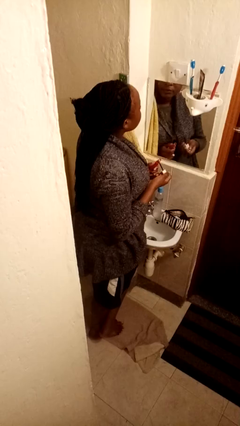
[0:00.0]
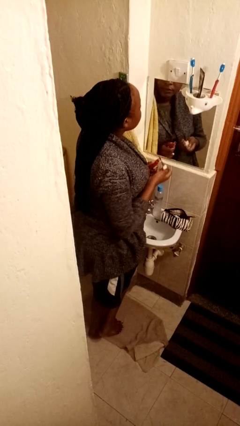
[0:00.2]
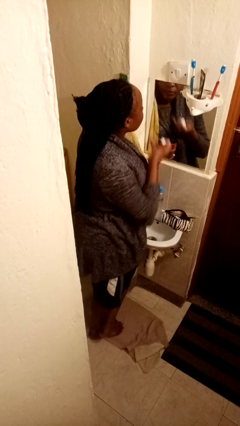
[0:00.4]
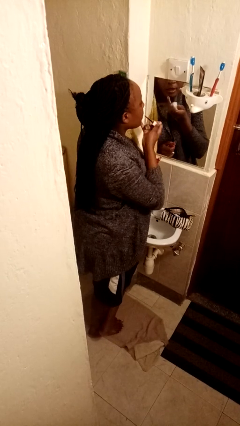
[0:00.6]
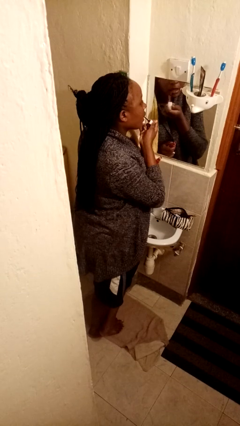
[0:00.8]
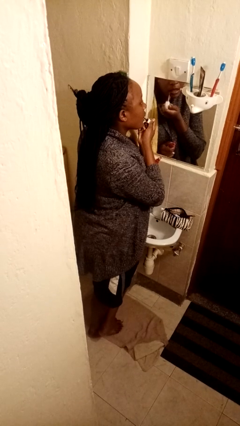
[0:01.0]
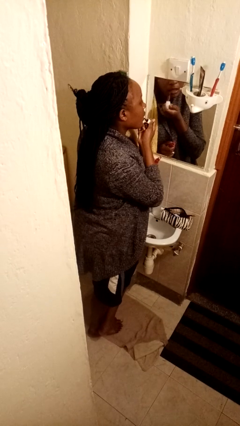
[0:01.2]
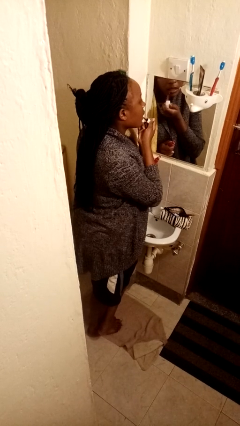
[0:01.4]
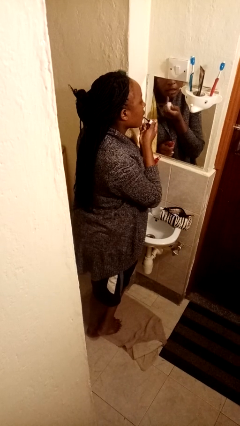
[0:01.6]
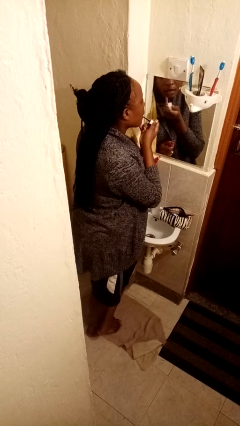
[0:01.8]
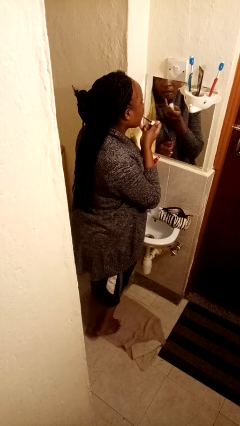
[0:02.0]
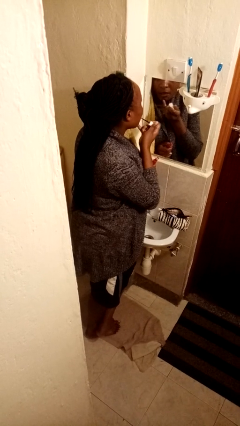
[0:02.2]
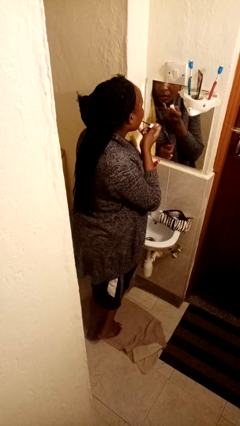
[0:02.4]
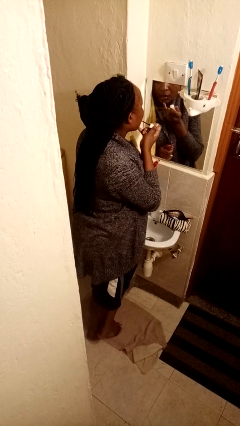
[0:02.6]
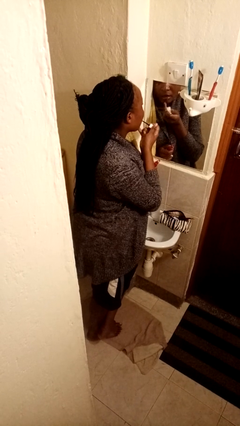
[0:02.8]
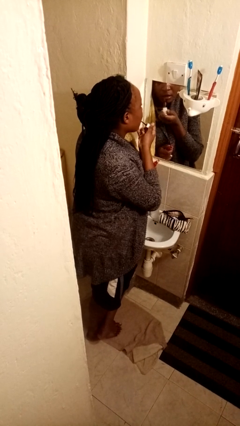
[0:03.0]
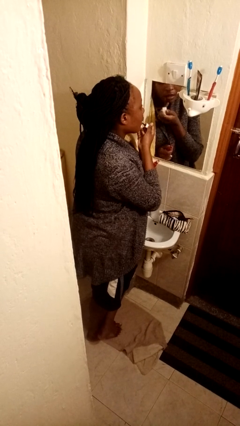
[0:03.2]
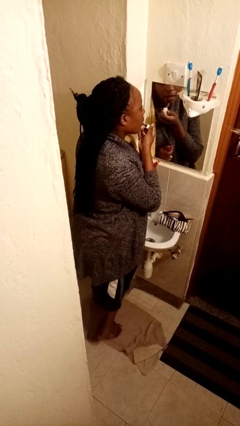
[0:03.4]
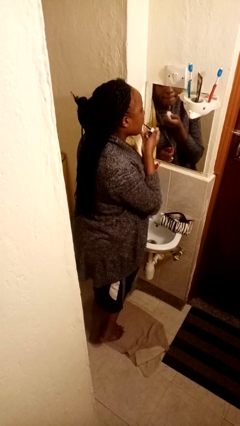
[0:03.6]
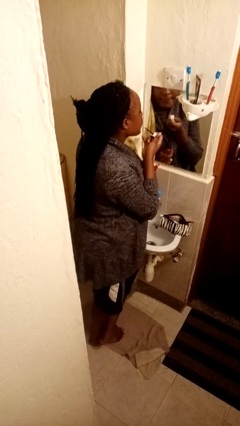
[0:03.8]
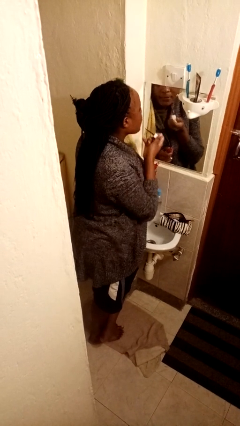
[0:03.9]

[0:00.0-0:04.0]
person applies lip makeup

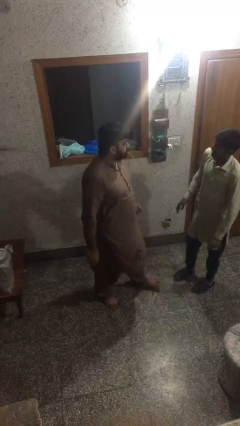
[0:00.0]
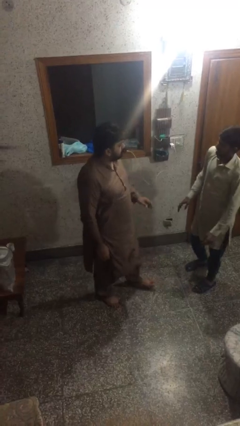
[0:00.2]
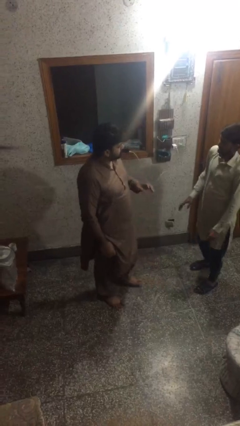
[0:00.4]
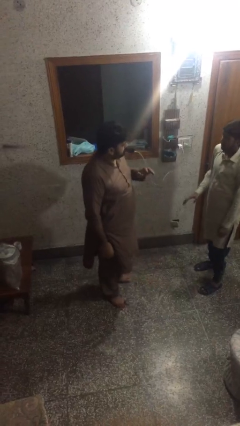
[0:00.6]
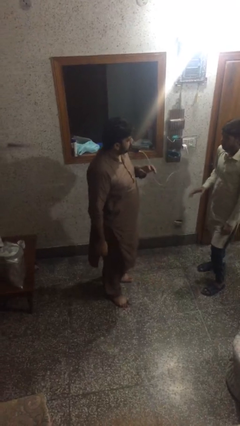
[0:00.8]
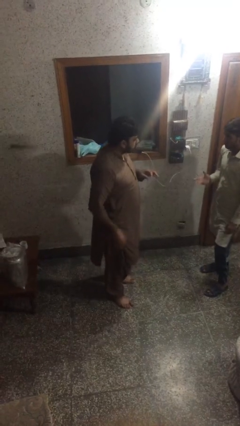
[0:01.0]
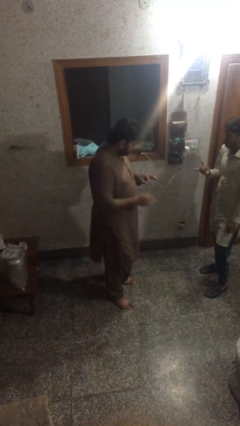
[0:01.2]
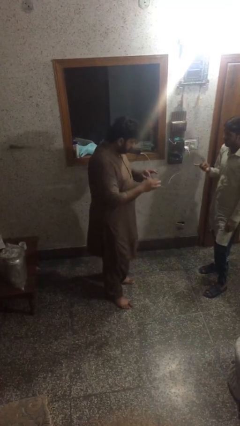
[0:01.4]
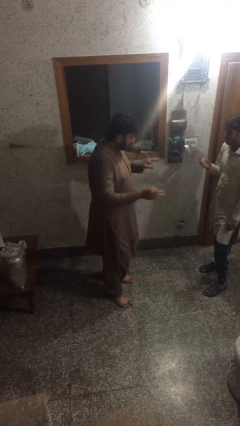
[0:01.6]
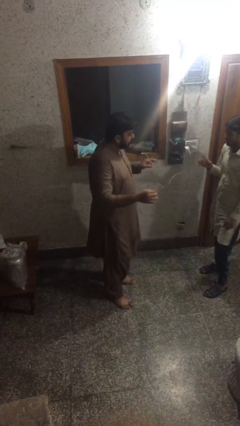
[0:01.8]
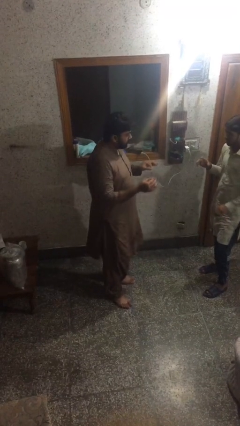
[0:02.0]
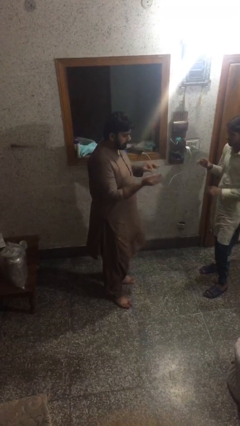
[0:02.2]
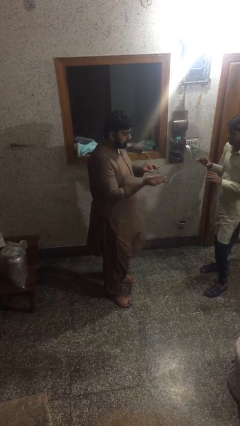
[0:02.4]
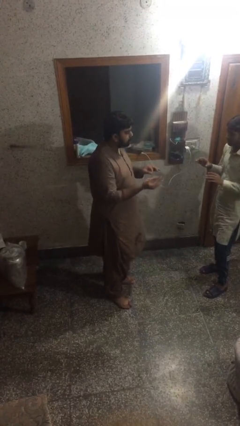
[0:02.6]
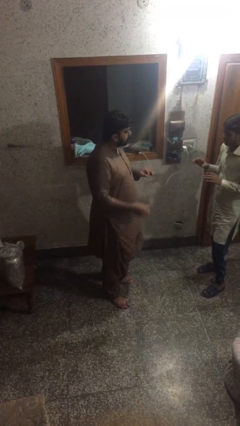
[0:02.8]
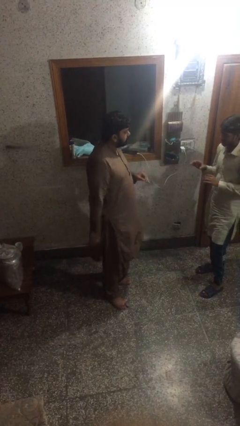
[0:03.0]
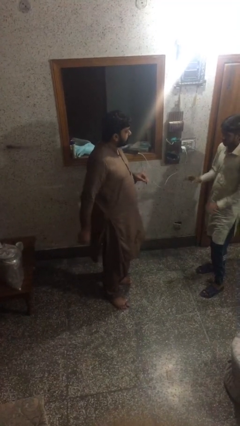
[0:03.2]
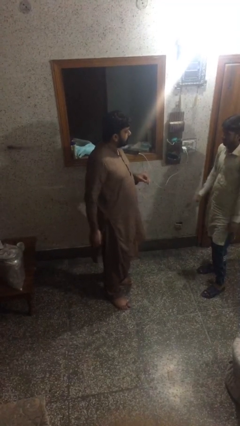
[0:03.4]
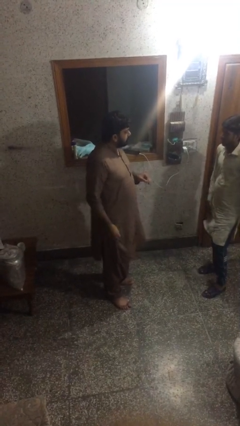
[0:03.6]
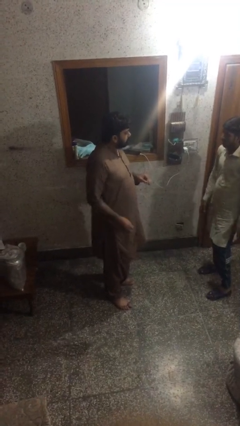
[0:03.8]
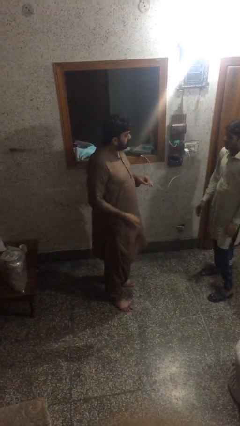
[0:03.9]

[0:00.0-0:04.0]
person talks to person

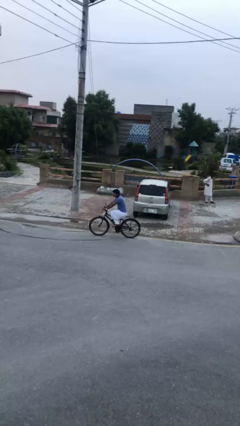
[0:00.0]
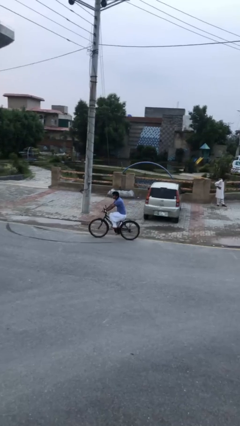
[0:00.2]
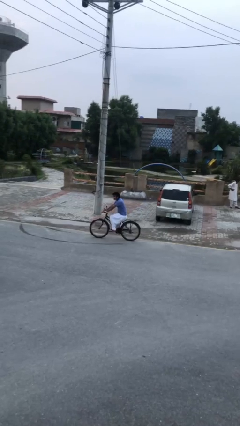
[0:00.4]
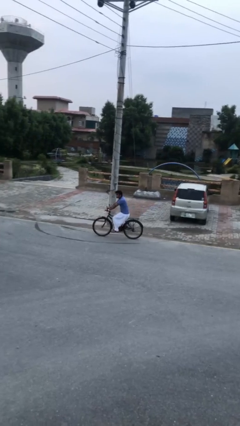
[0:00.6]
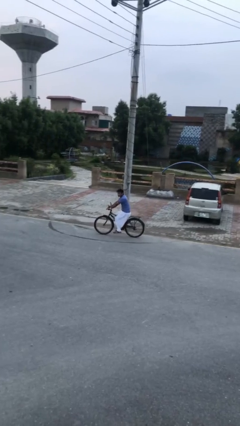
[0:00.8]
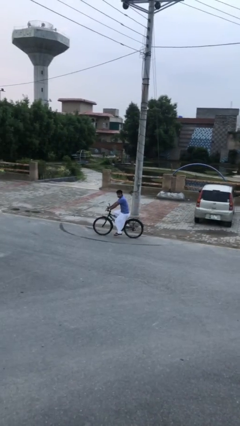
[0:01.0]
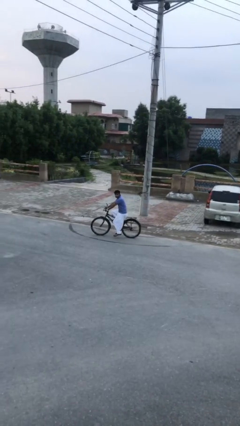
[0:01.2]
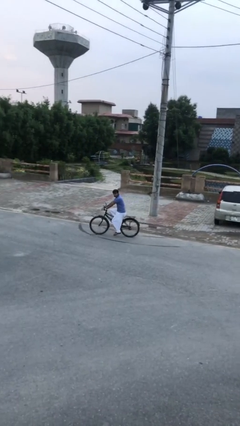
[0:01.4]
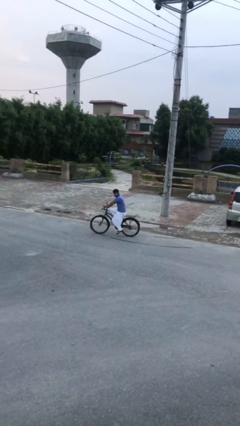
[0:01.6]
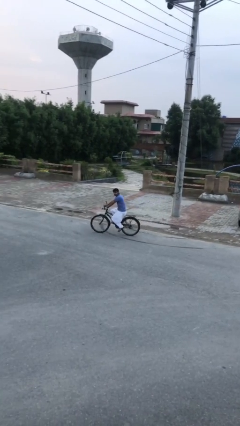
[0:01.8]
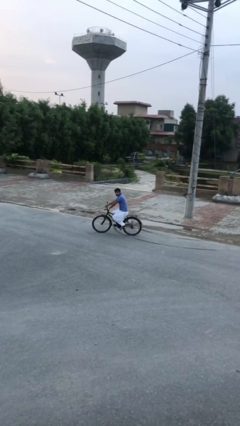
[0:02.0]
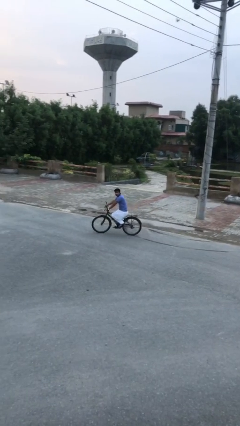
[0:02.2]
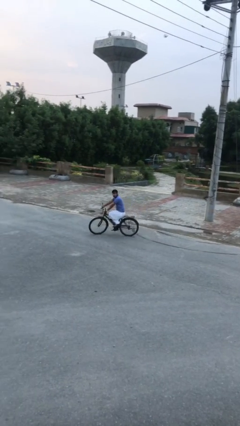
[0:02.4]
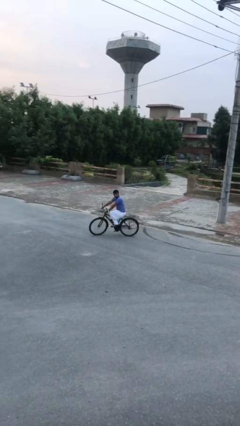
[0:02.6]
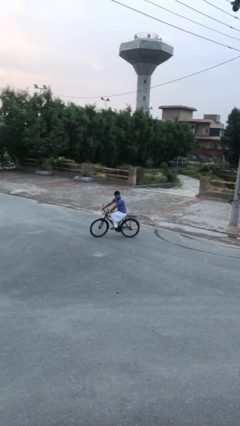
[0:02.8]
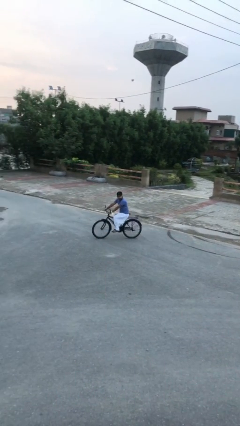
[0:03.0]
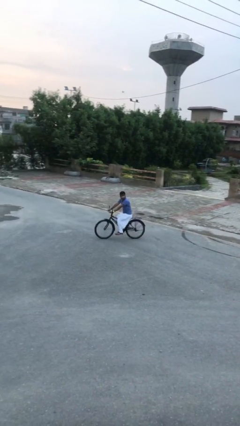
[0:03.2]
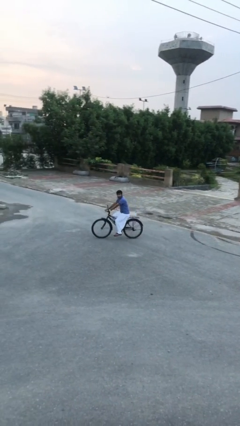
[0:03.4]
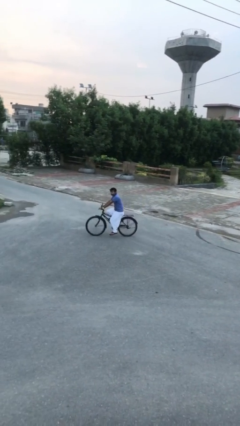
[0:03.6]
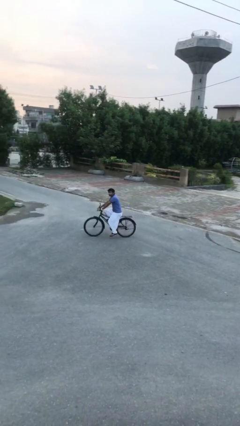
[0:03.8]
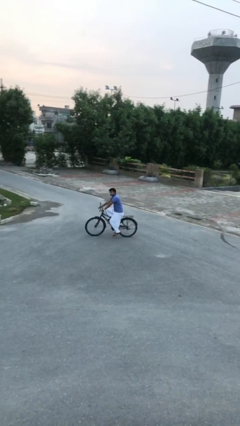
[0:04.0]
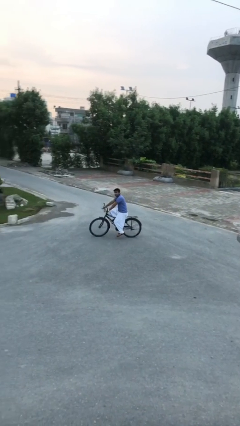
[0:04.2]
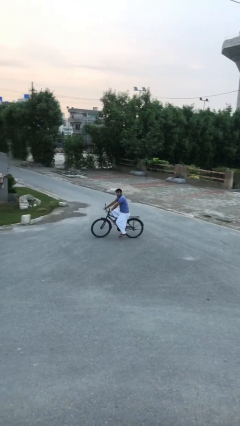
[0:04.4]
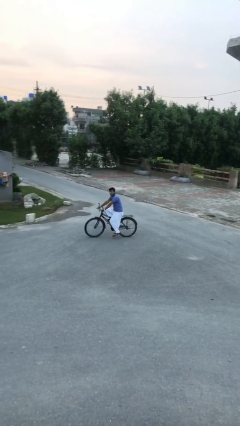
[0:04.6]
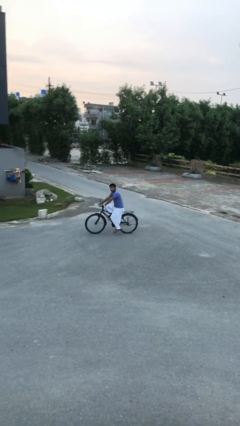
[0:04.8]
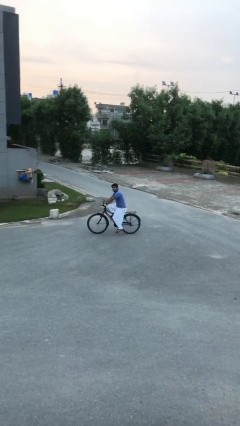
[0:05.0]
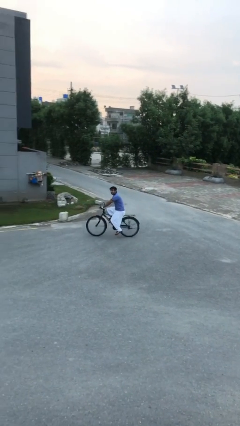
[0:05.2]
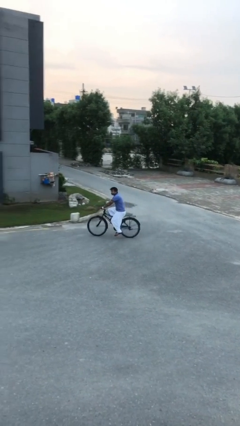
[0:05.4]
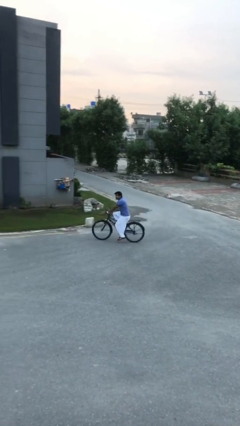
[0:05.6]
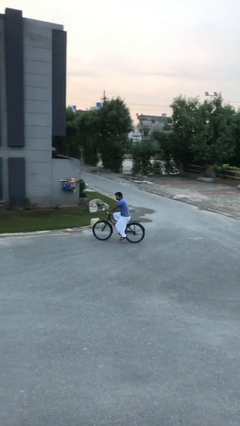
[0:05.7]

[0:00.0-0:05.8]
person rides bicycle

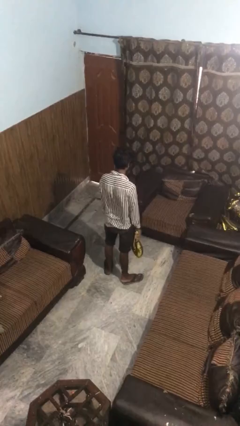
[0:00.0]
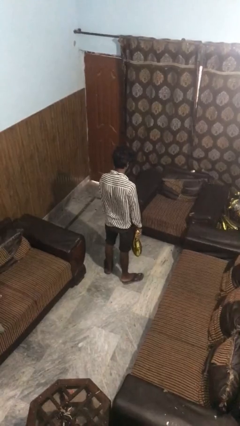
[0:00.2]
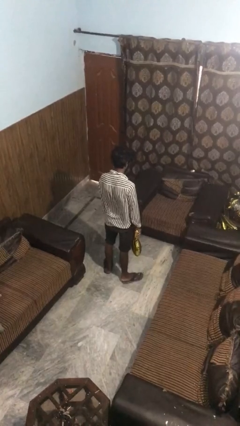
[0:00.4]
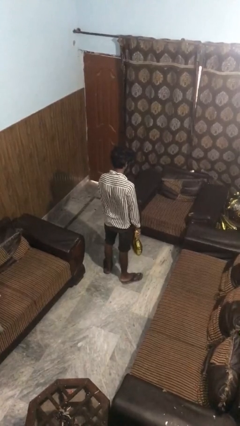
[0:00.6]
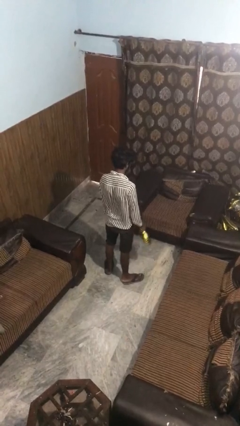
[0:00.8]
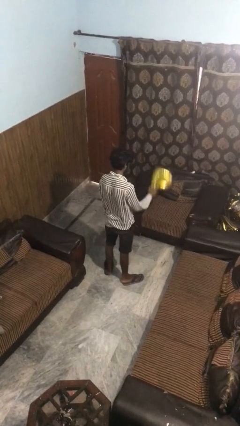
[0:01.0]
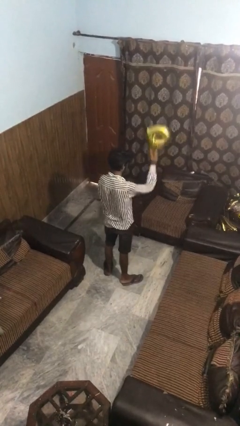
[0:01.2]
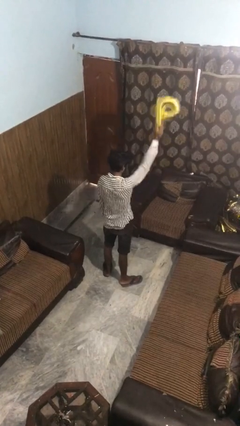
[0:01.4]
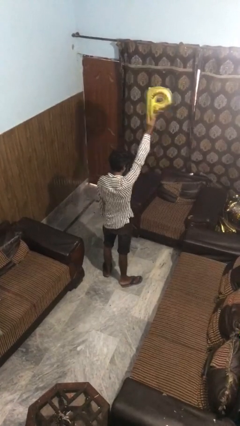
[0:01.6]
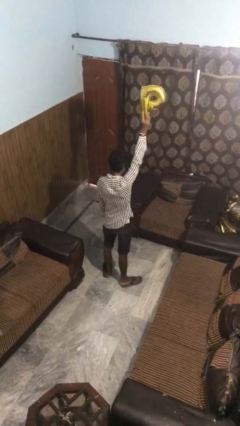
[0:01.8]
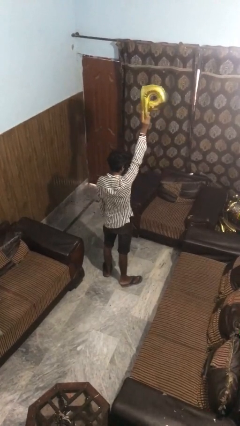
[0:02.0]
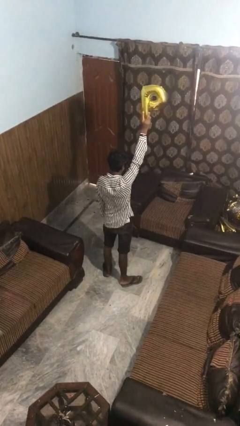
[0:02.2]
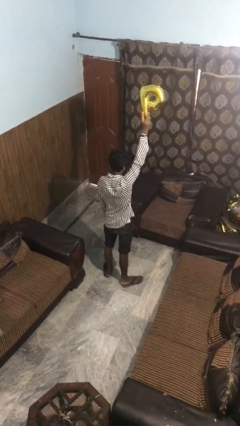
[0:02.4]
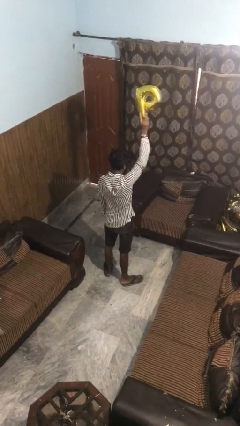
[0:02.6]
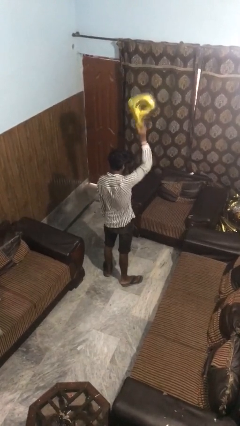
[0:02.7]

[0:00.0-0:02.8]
person holds object above head

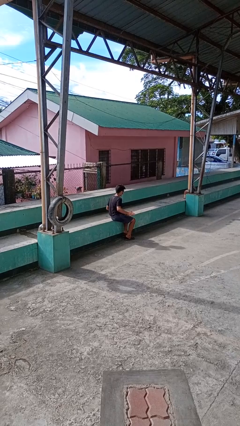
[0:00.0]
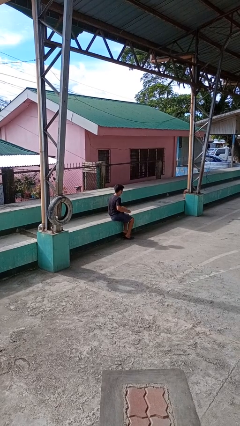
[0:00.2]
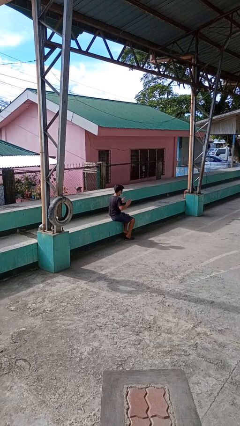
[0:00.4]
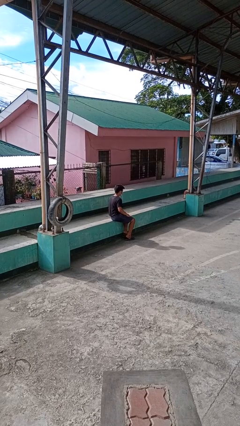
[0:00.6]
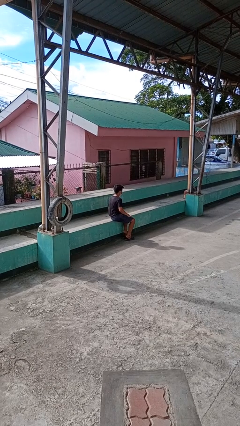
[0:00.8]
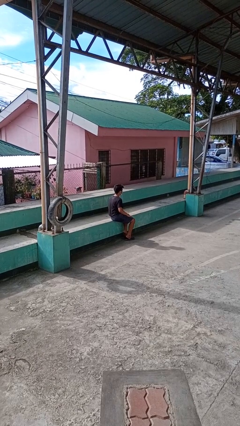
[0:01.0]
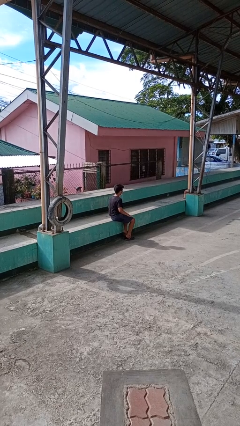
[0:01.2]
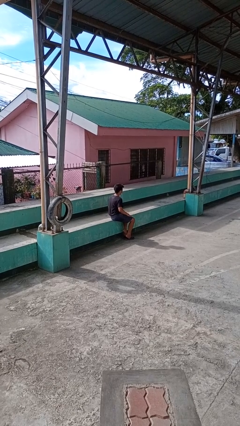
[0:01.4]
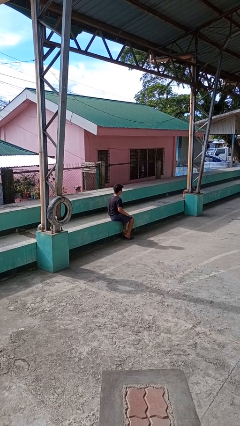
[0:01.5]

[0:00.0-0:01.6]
person slaps hands on thighs
